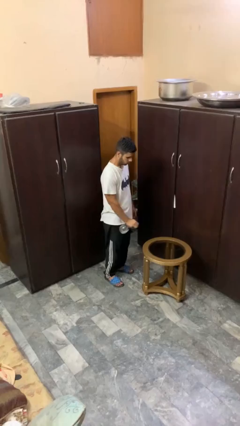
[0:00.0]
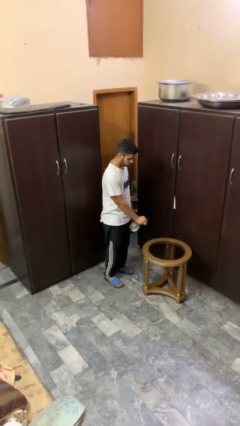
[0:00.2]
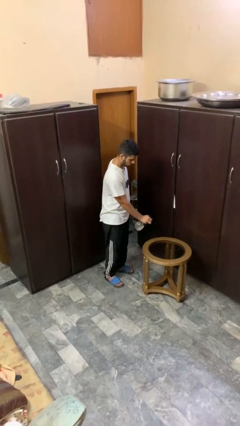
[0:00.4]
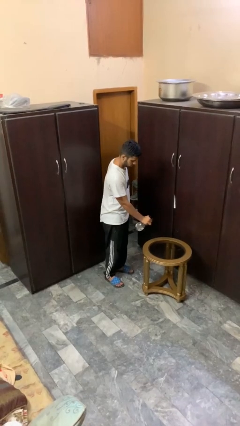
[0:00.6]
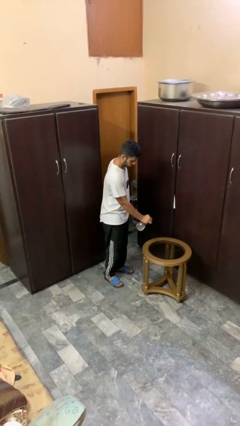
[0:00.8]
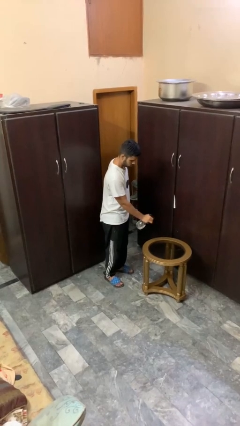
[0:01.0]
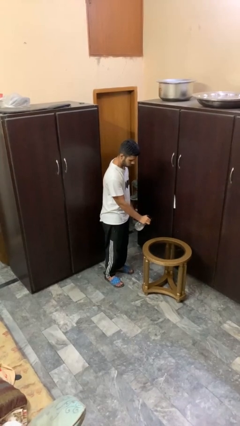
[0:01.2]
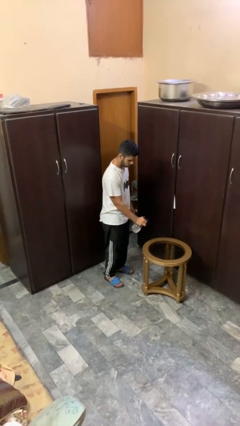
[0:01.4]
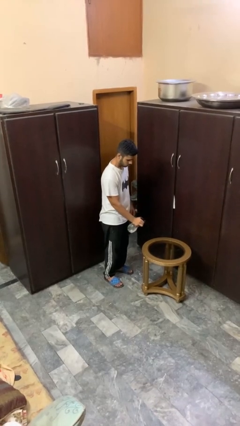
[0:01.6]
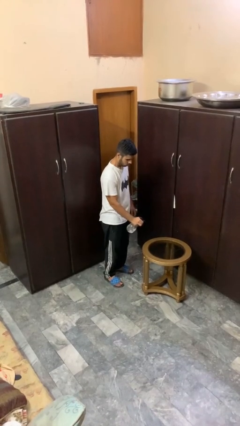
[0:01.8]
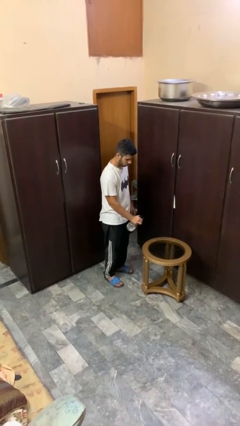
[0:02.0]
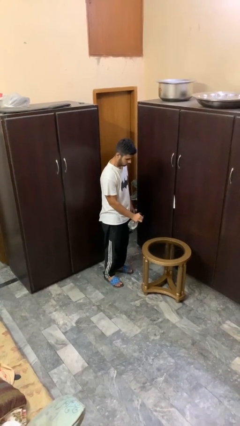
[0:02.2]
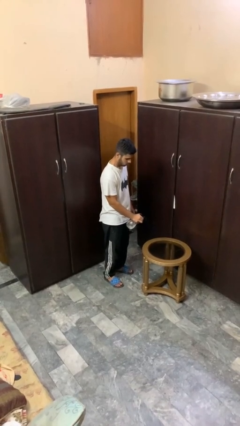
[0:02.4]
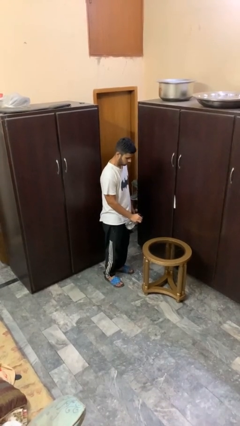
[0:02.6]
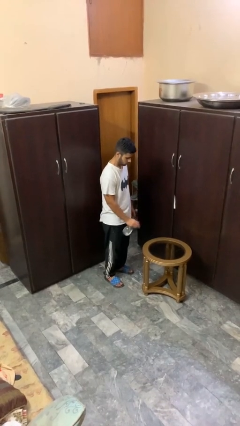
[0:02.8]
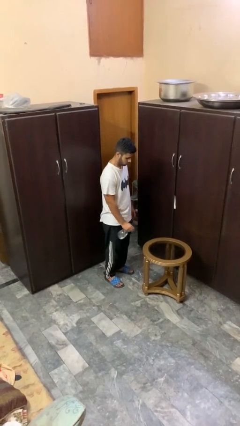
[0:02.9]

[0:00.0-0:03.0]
person sprays from bottle

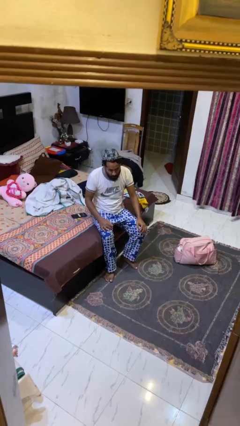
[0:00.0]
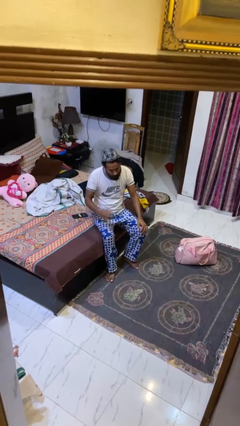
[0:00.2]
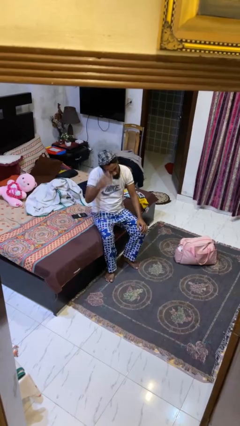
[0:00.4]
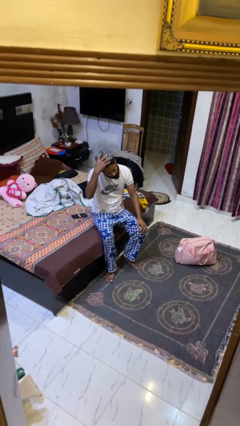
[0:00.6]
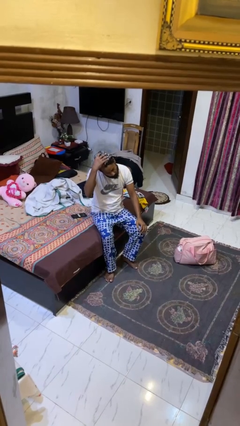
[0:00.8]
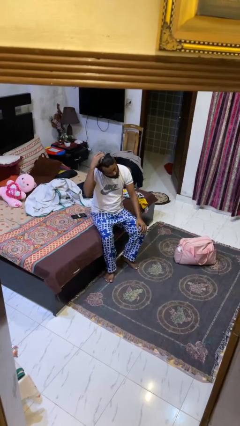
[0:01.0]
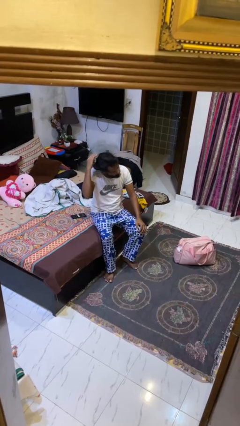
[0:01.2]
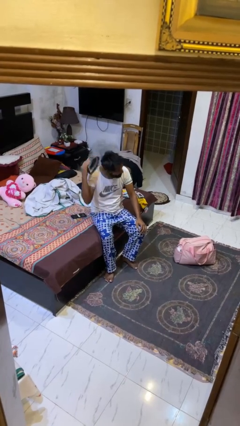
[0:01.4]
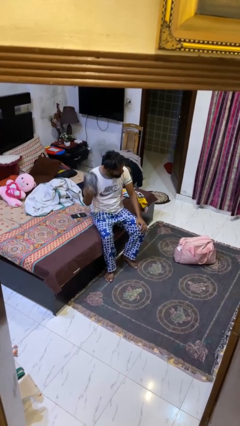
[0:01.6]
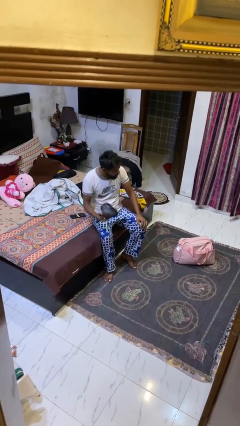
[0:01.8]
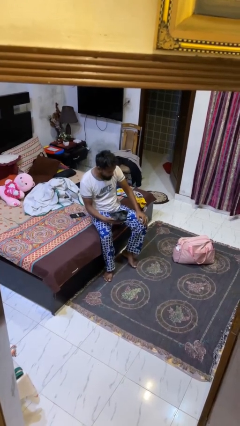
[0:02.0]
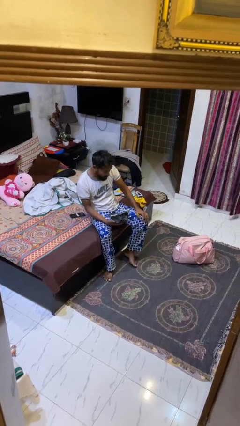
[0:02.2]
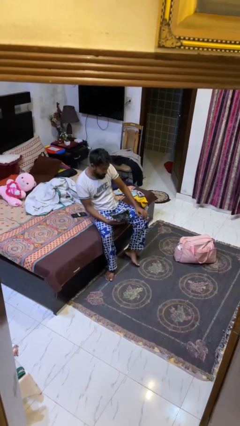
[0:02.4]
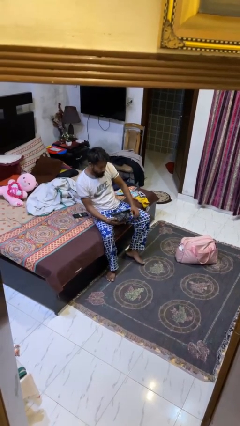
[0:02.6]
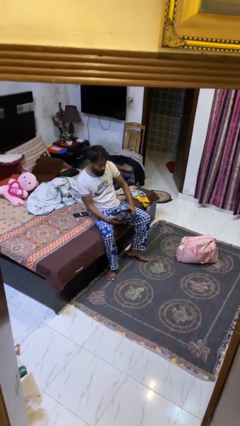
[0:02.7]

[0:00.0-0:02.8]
person takes off hat

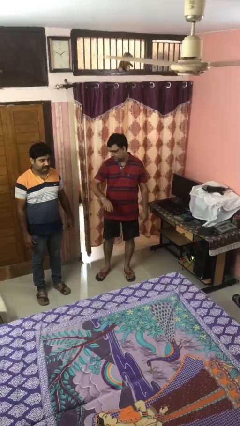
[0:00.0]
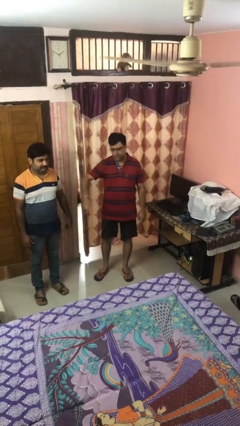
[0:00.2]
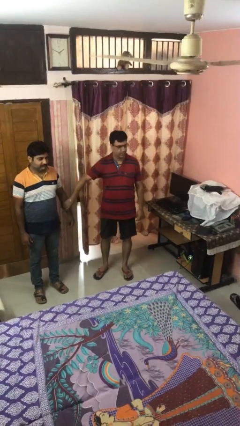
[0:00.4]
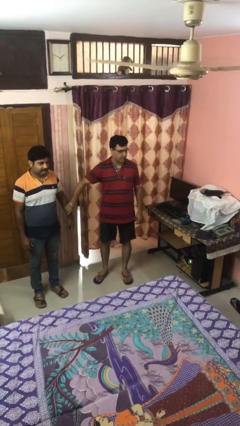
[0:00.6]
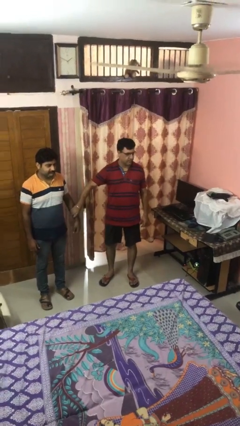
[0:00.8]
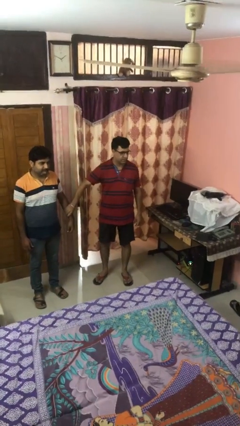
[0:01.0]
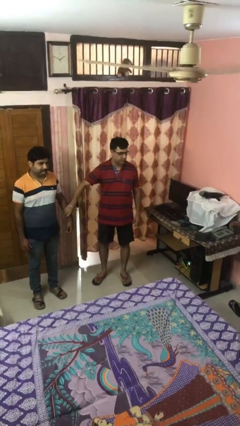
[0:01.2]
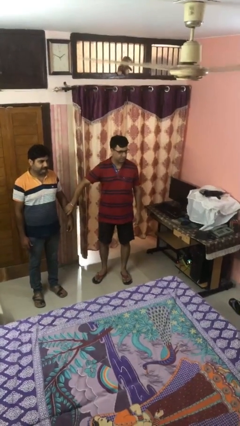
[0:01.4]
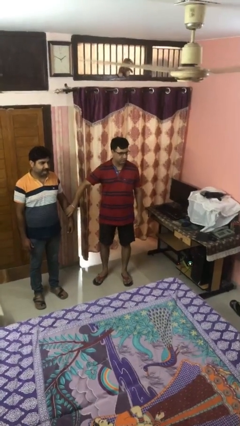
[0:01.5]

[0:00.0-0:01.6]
person grabs person by forearm

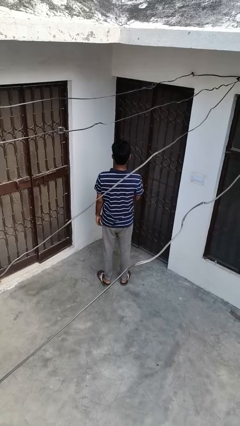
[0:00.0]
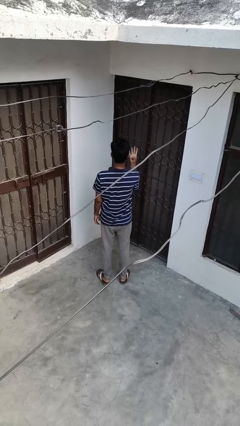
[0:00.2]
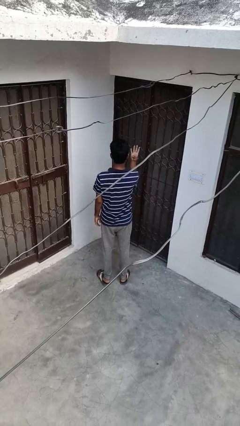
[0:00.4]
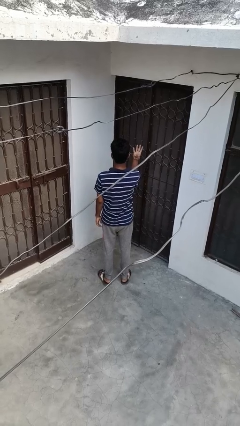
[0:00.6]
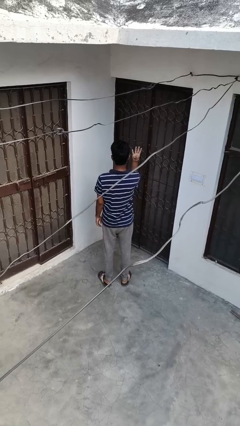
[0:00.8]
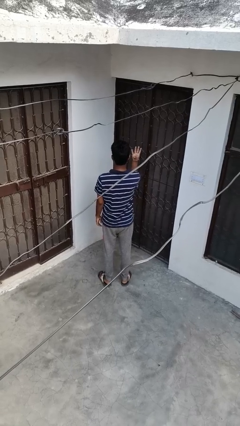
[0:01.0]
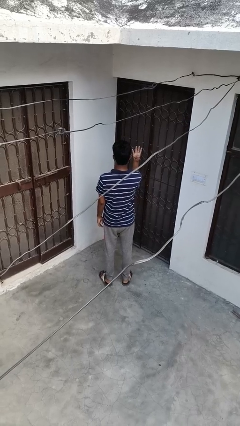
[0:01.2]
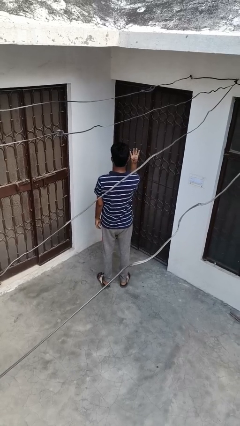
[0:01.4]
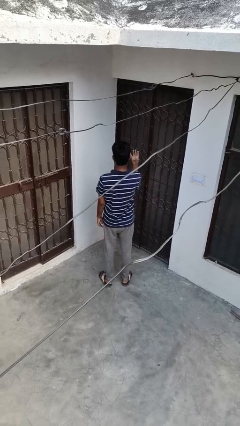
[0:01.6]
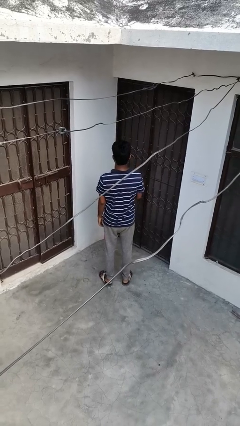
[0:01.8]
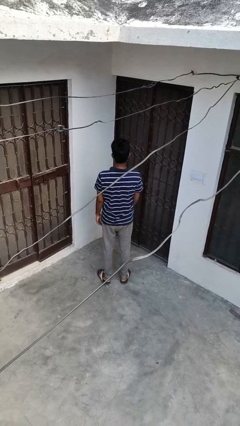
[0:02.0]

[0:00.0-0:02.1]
person gestures number four

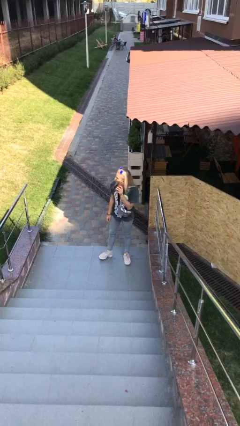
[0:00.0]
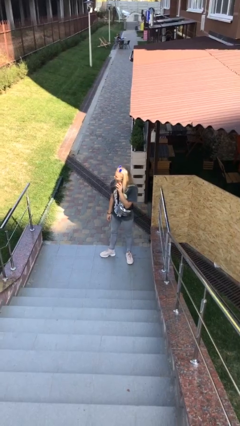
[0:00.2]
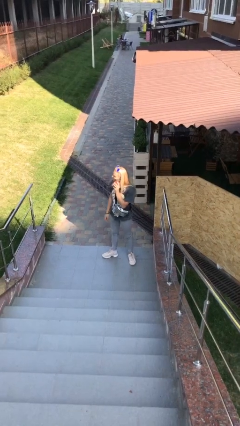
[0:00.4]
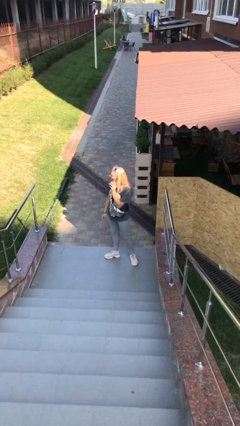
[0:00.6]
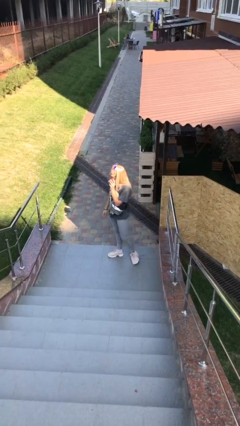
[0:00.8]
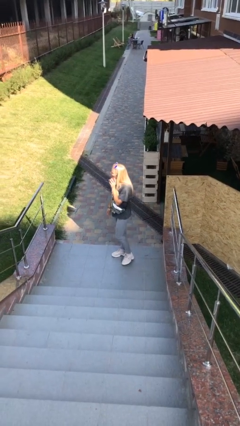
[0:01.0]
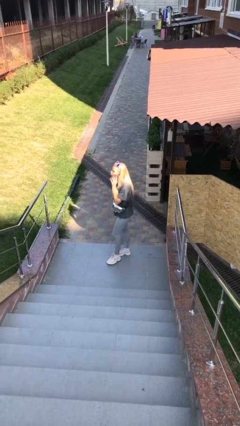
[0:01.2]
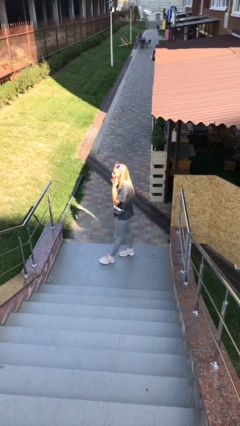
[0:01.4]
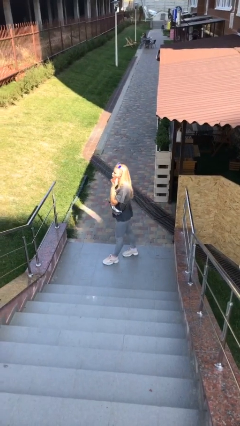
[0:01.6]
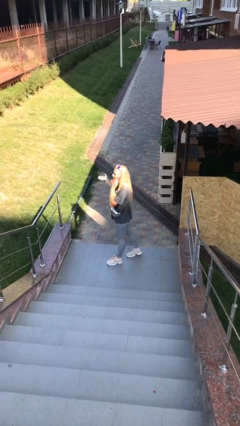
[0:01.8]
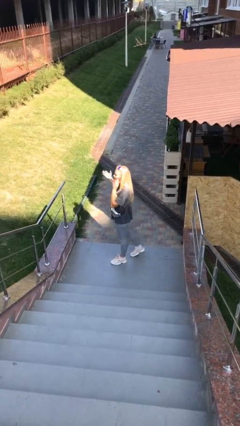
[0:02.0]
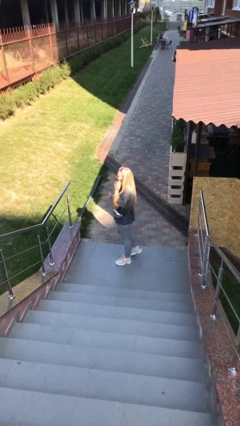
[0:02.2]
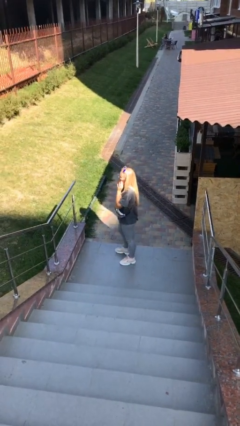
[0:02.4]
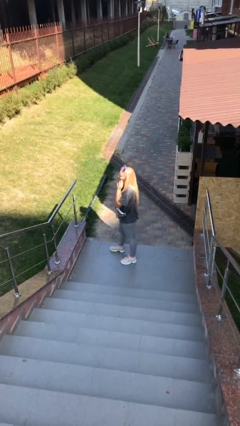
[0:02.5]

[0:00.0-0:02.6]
person talks on phone

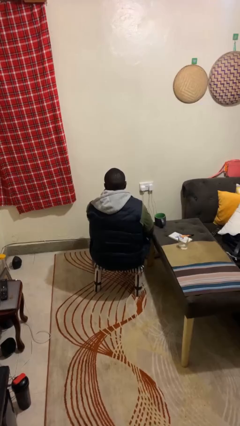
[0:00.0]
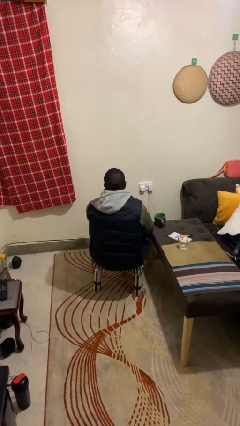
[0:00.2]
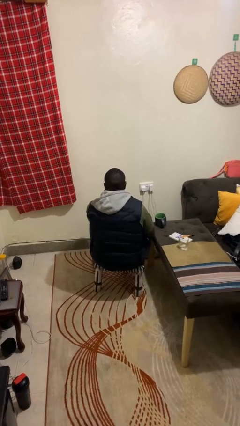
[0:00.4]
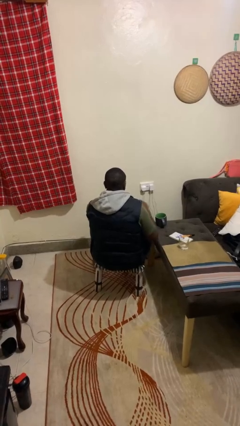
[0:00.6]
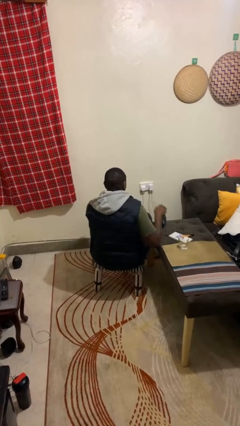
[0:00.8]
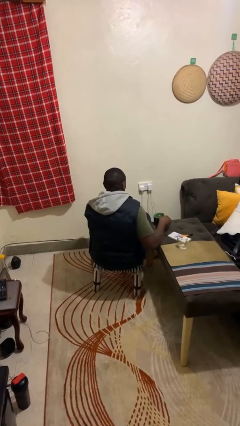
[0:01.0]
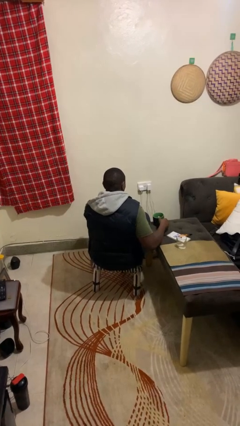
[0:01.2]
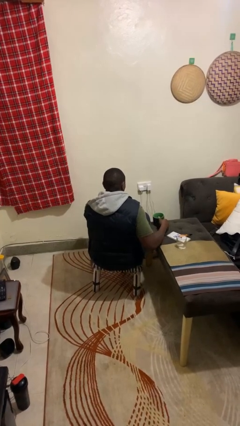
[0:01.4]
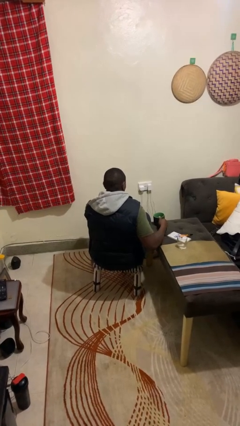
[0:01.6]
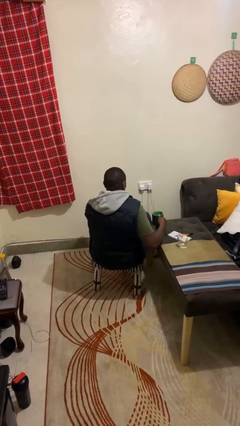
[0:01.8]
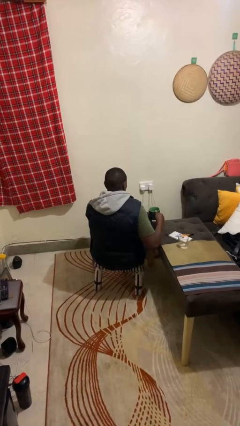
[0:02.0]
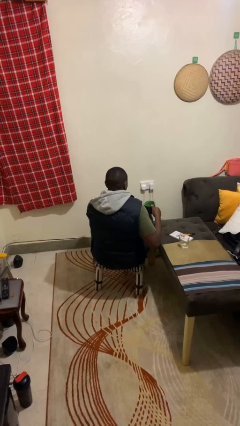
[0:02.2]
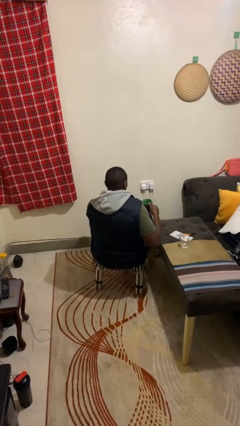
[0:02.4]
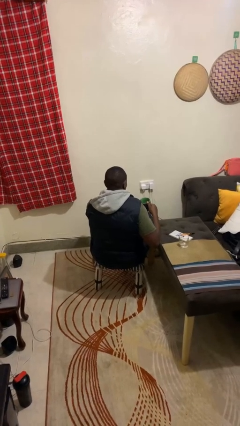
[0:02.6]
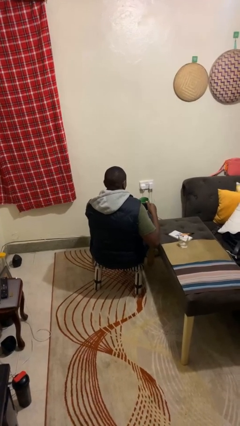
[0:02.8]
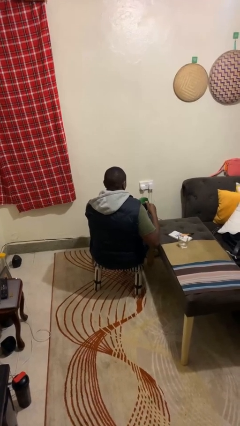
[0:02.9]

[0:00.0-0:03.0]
person picks up object from table

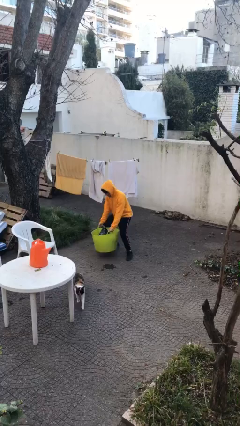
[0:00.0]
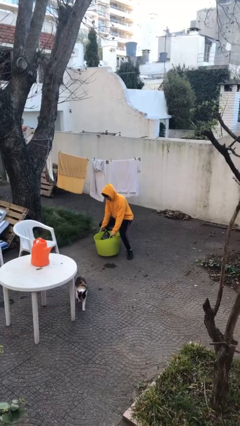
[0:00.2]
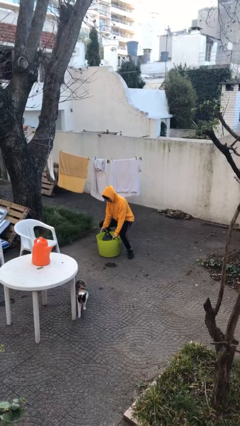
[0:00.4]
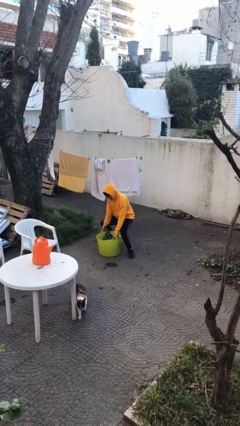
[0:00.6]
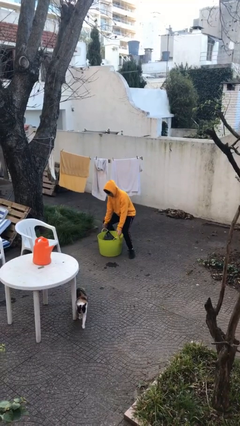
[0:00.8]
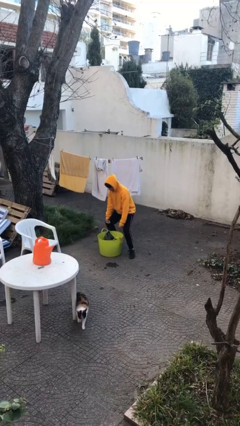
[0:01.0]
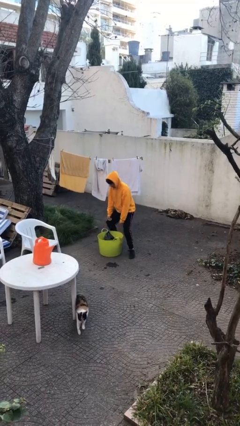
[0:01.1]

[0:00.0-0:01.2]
person puts down object on floor

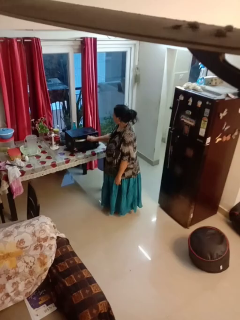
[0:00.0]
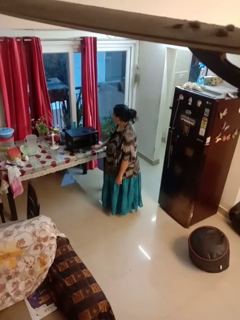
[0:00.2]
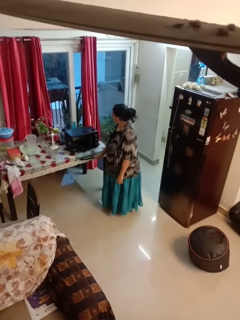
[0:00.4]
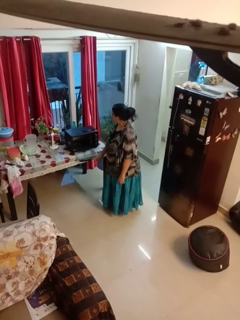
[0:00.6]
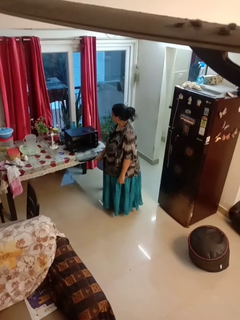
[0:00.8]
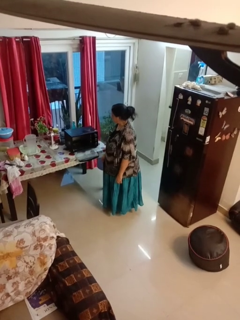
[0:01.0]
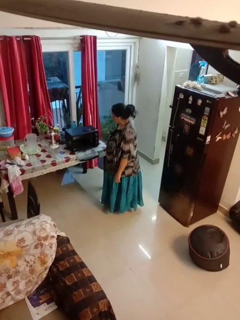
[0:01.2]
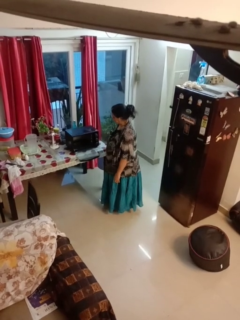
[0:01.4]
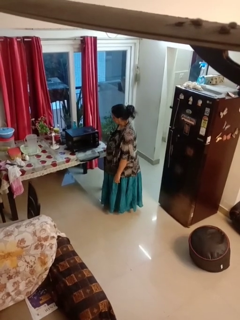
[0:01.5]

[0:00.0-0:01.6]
person opens microwave
